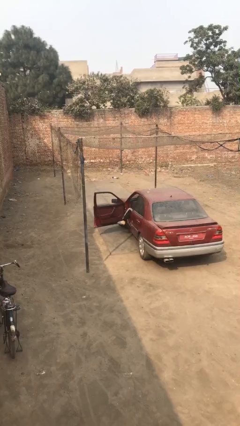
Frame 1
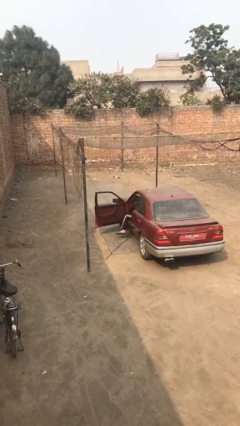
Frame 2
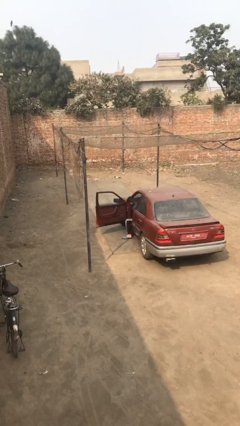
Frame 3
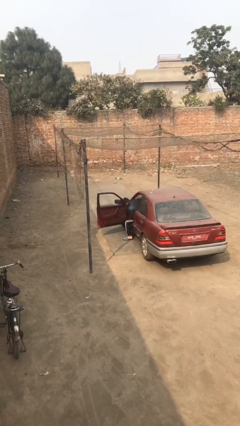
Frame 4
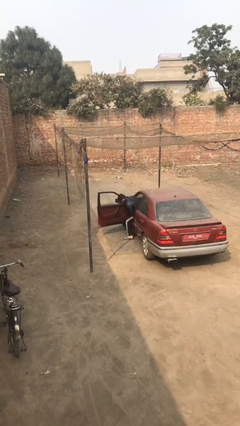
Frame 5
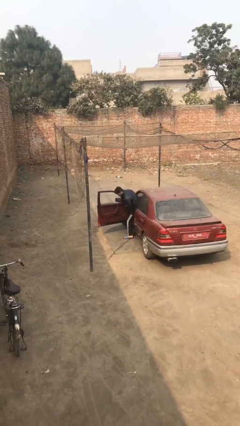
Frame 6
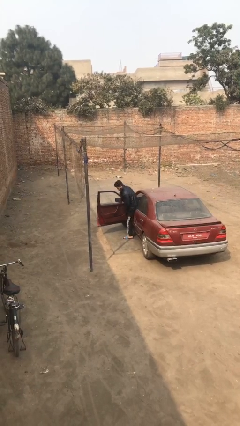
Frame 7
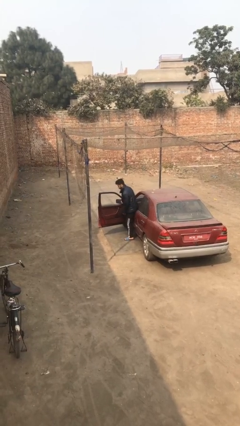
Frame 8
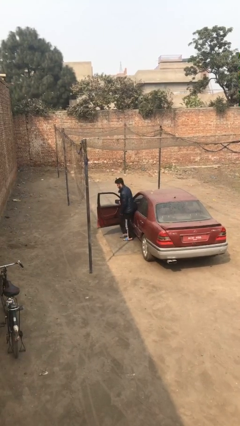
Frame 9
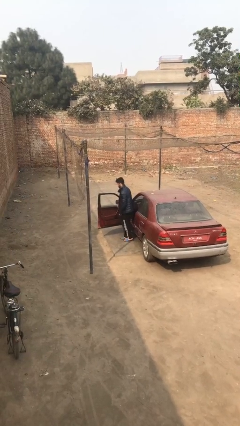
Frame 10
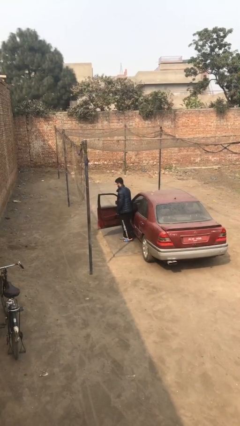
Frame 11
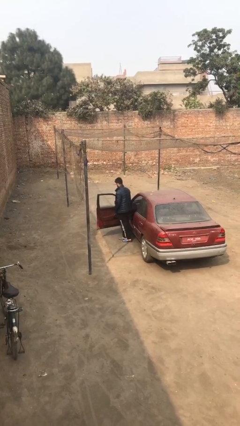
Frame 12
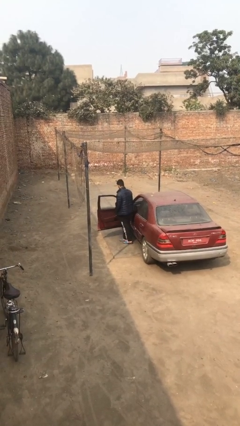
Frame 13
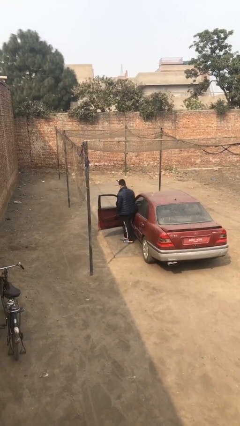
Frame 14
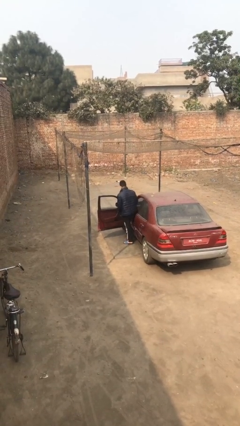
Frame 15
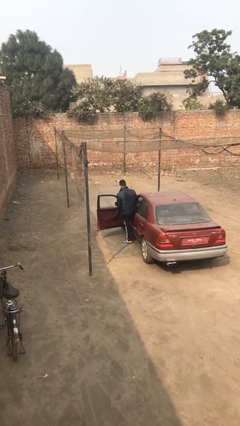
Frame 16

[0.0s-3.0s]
person exits car

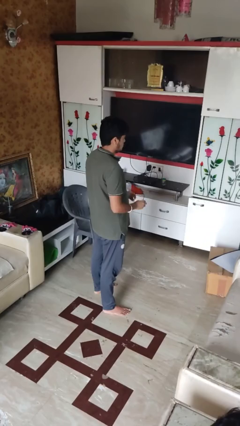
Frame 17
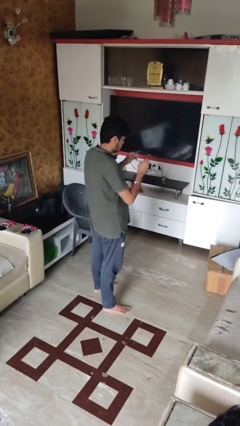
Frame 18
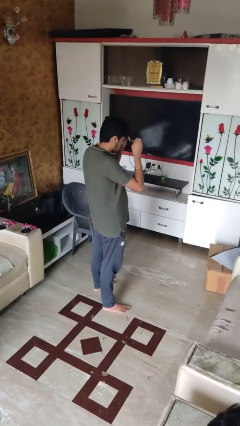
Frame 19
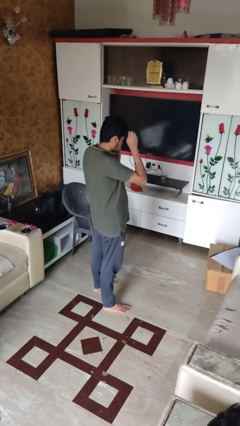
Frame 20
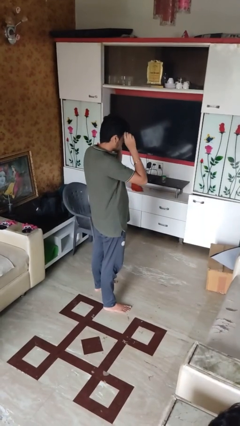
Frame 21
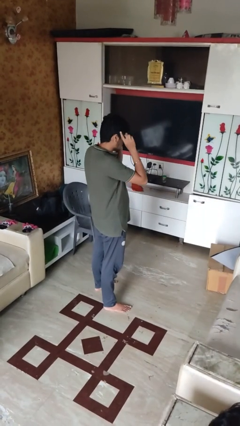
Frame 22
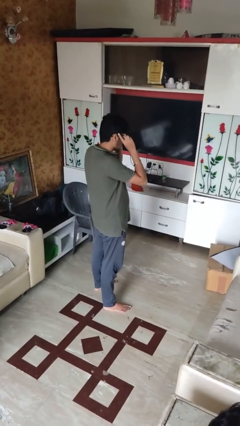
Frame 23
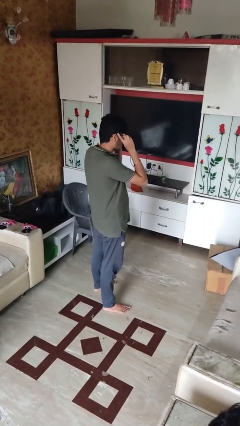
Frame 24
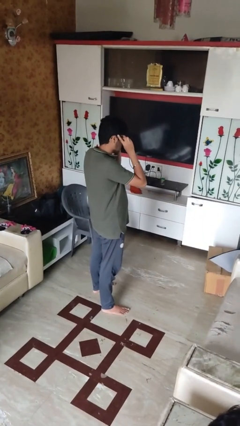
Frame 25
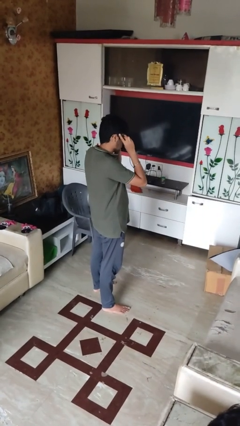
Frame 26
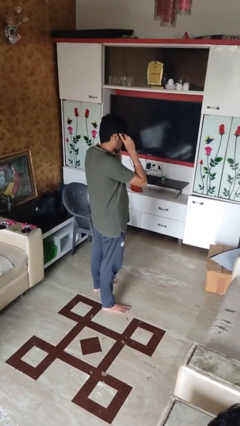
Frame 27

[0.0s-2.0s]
person puts on glasses

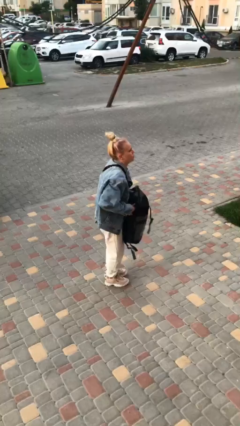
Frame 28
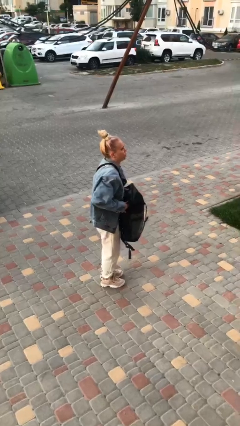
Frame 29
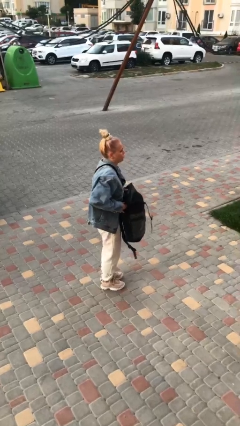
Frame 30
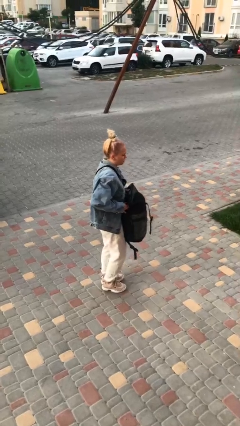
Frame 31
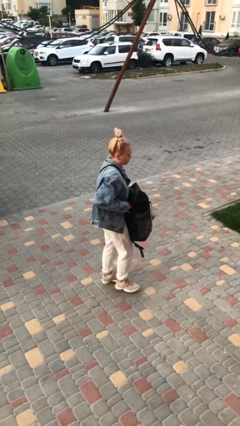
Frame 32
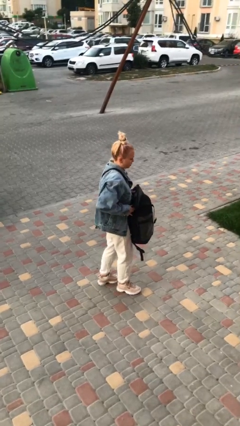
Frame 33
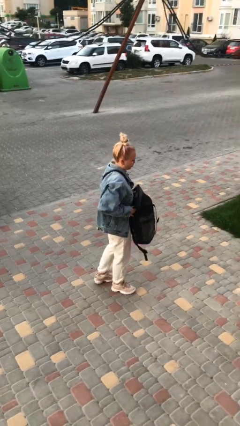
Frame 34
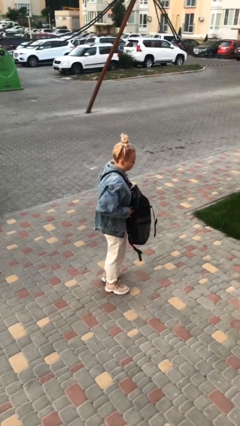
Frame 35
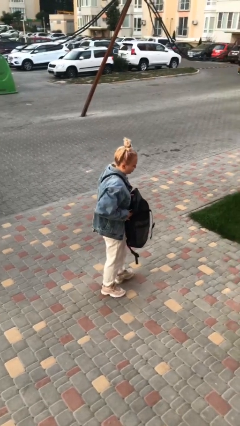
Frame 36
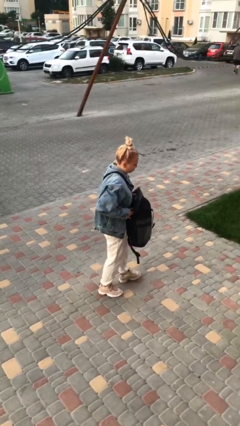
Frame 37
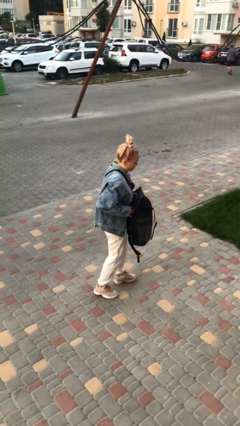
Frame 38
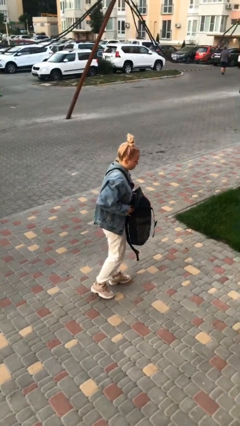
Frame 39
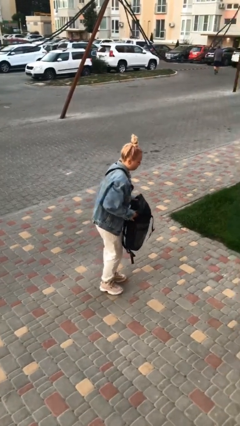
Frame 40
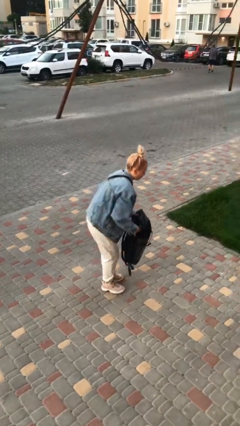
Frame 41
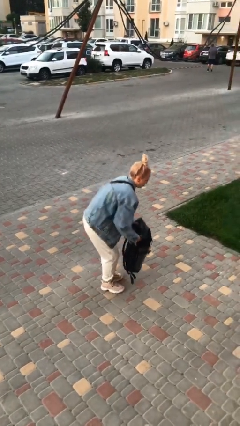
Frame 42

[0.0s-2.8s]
person carries heavy object

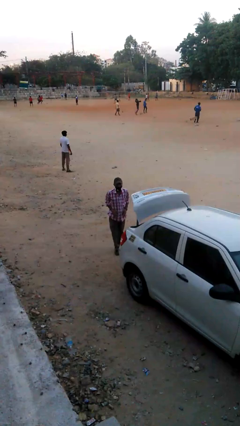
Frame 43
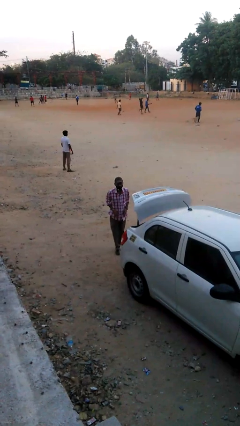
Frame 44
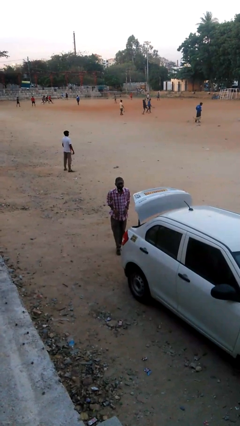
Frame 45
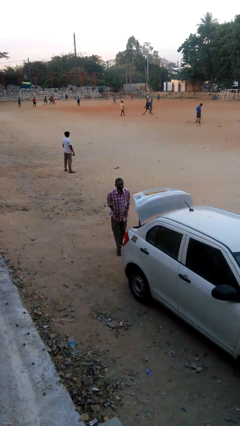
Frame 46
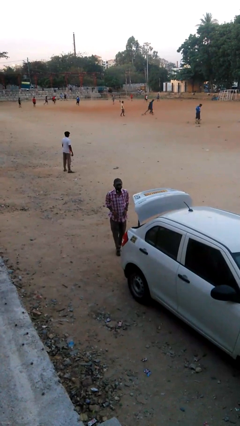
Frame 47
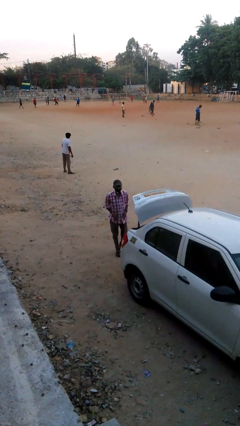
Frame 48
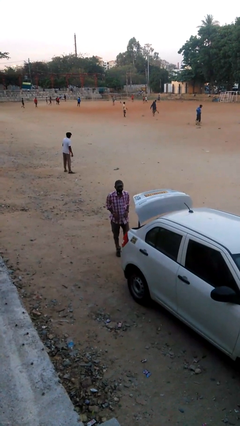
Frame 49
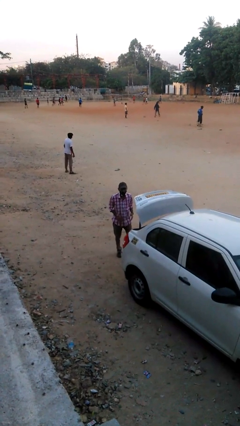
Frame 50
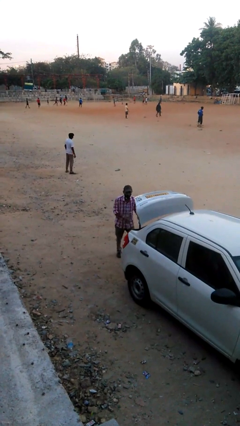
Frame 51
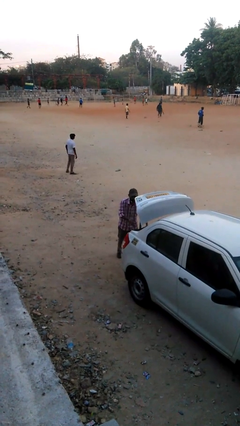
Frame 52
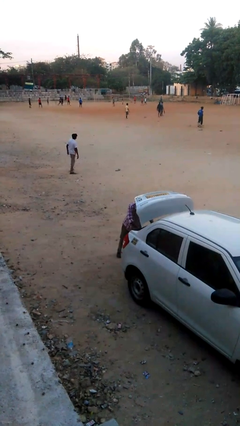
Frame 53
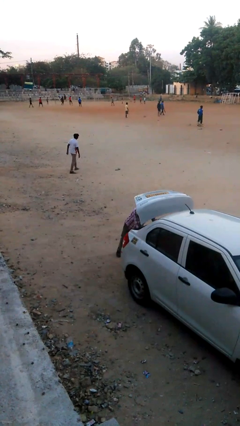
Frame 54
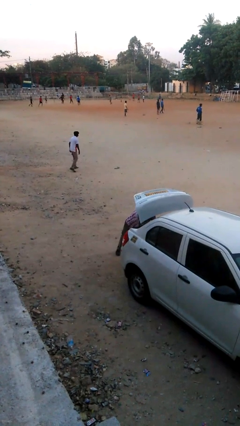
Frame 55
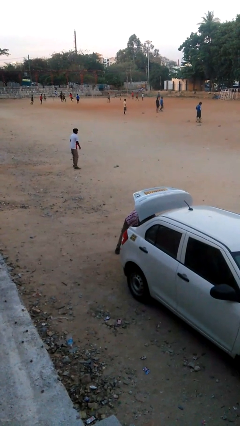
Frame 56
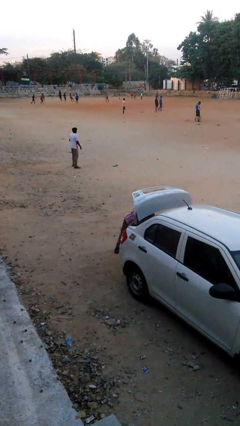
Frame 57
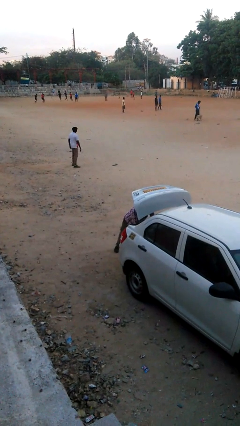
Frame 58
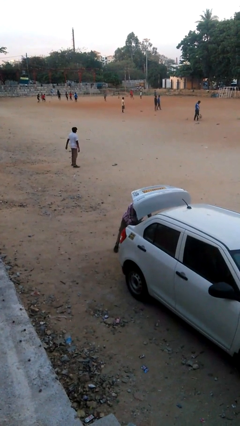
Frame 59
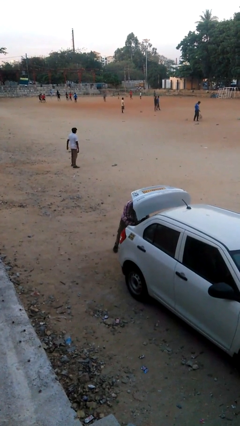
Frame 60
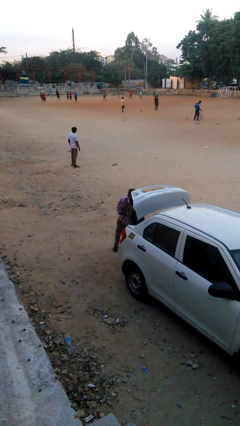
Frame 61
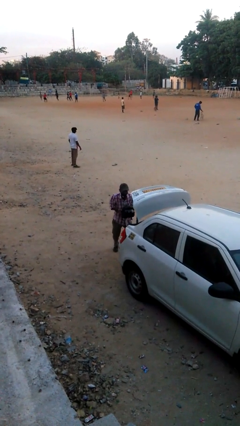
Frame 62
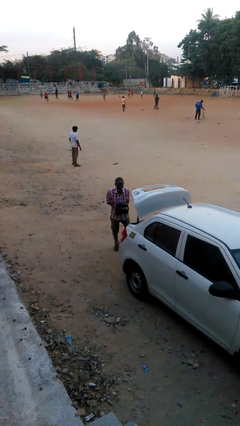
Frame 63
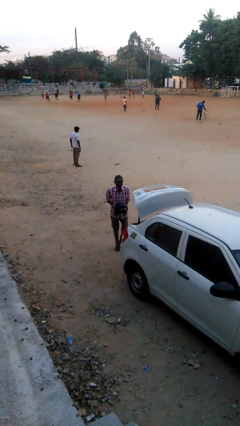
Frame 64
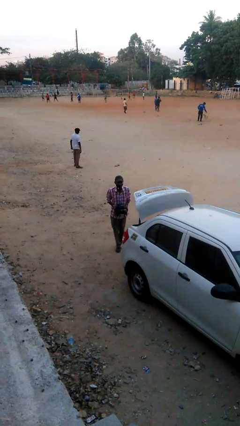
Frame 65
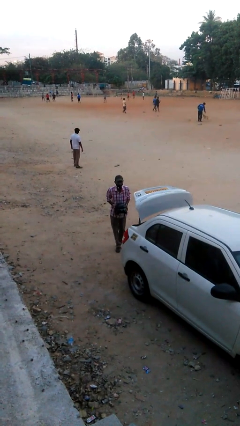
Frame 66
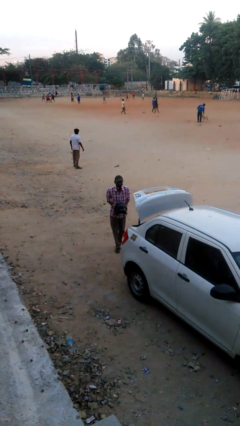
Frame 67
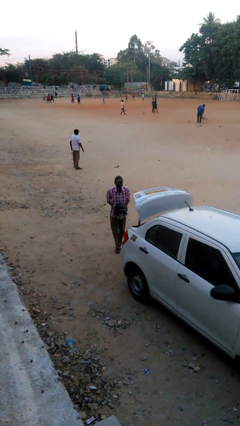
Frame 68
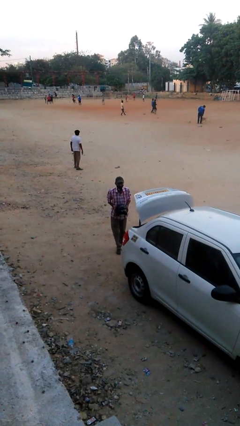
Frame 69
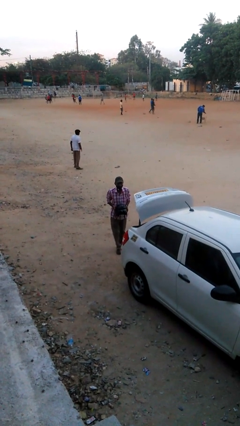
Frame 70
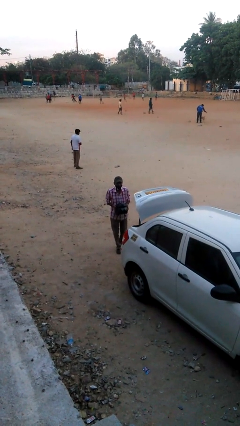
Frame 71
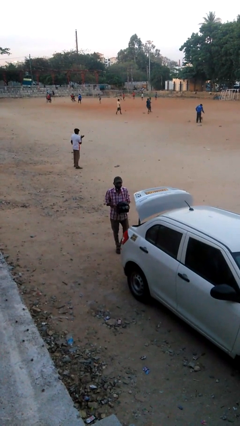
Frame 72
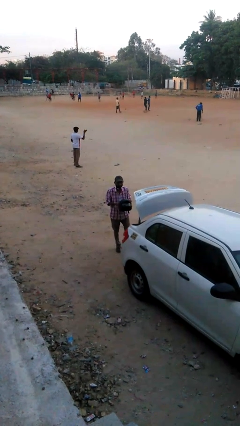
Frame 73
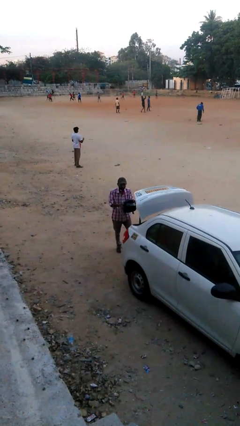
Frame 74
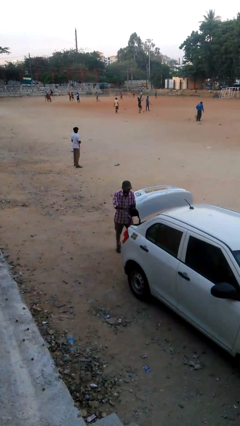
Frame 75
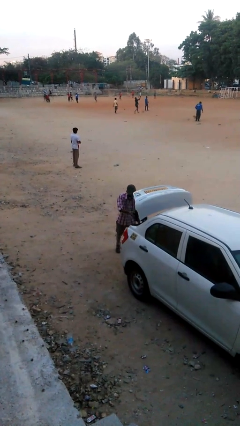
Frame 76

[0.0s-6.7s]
person unloads car

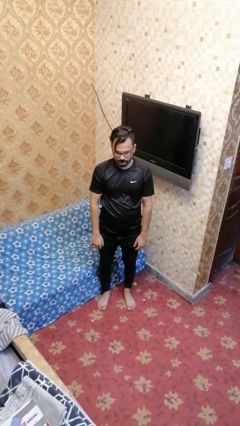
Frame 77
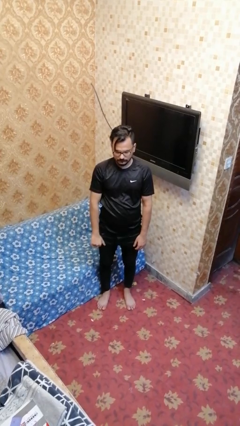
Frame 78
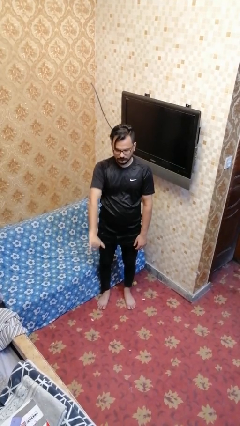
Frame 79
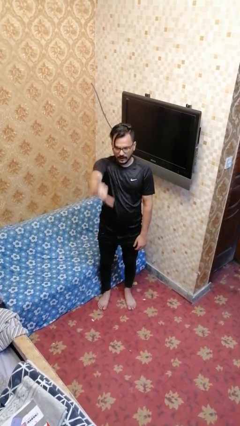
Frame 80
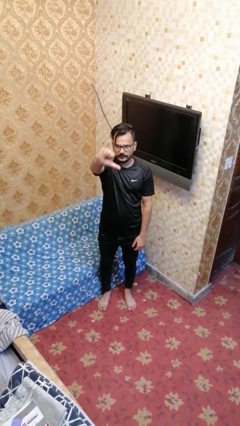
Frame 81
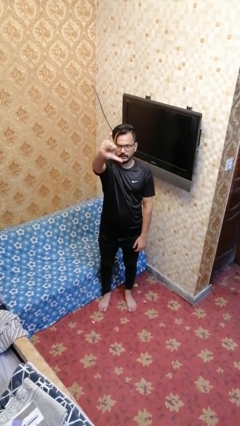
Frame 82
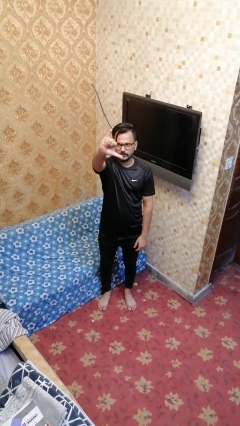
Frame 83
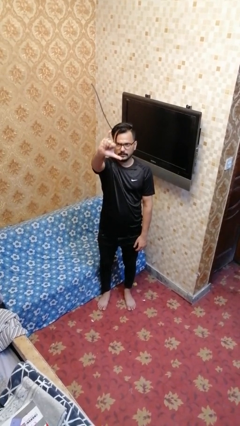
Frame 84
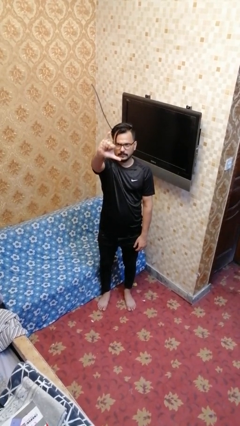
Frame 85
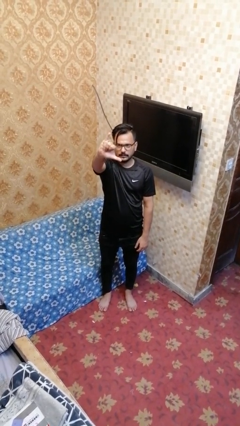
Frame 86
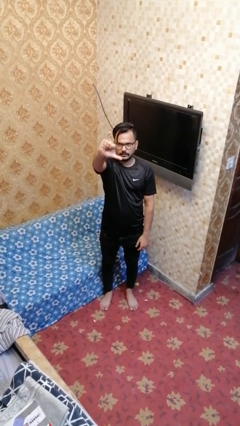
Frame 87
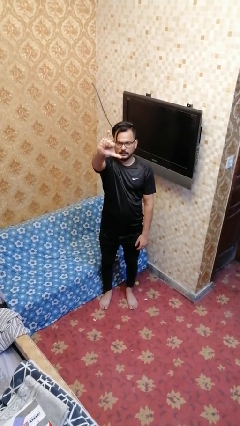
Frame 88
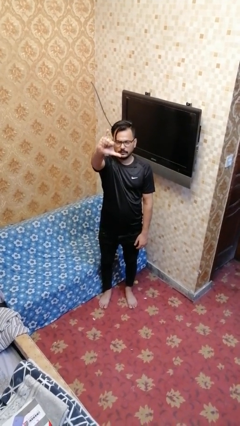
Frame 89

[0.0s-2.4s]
person gestures hang loose

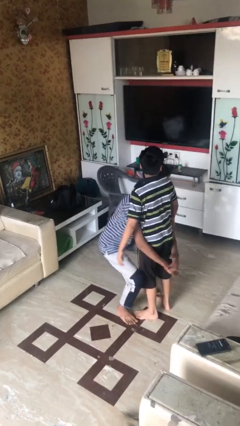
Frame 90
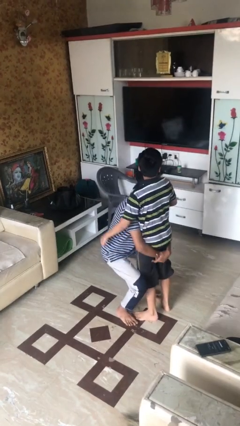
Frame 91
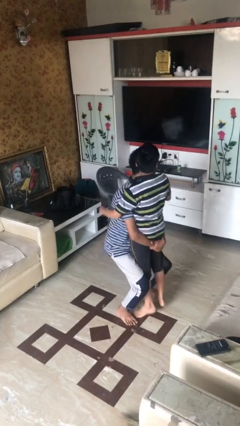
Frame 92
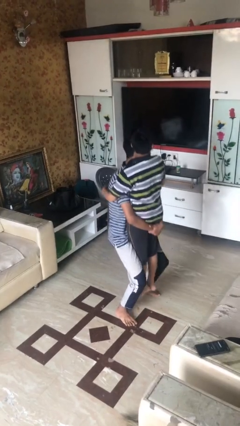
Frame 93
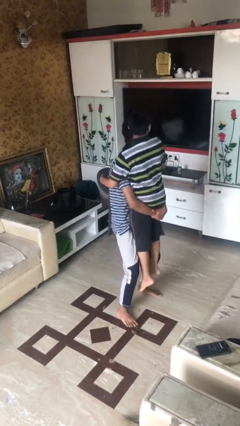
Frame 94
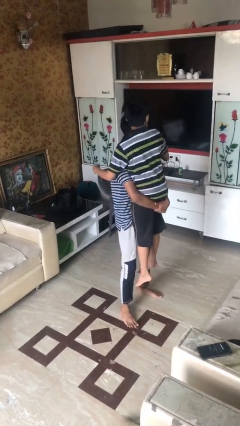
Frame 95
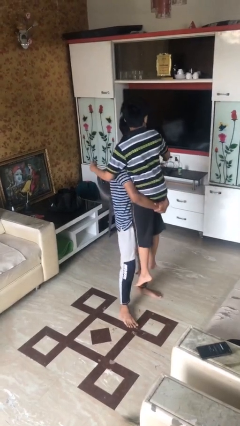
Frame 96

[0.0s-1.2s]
person picks up person
